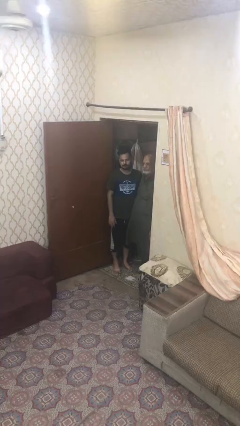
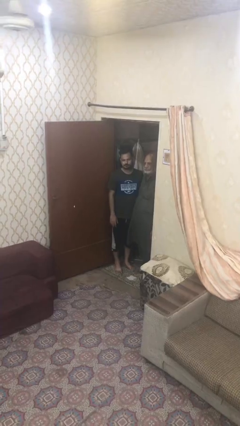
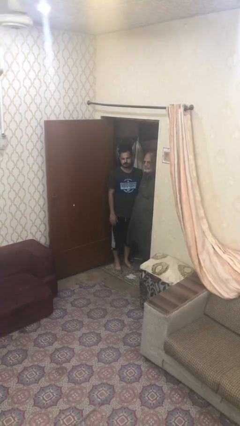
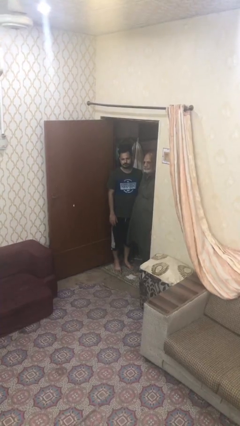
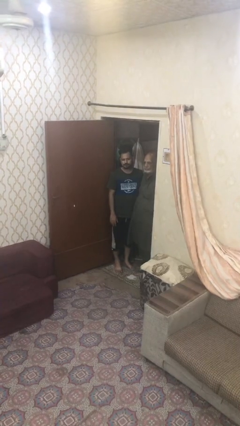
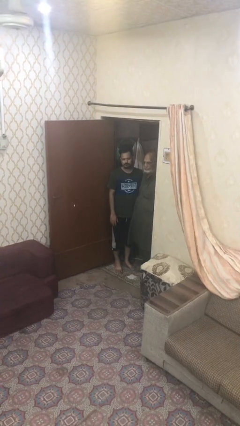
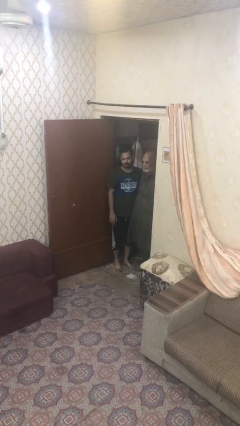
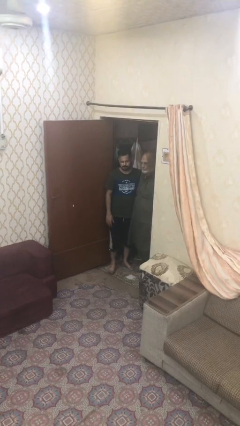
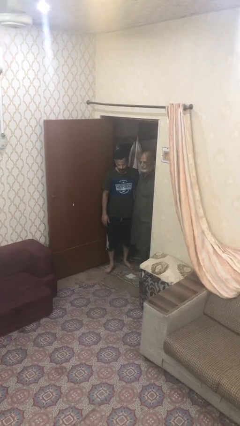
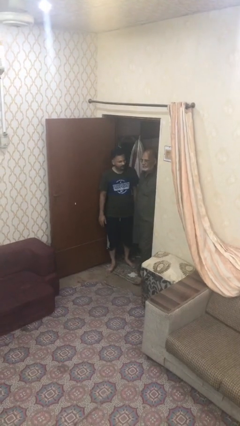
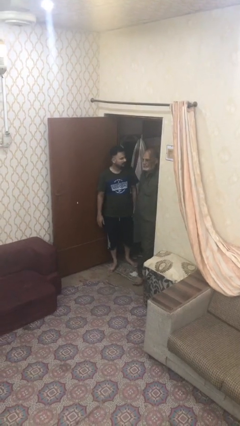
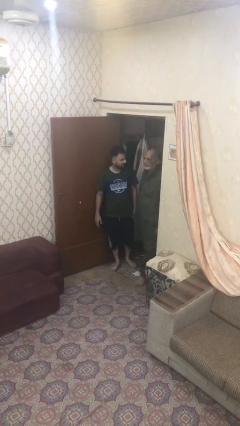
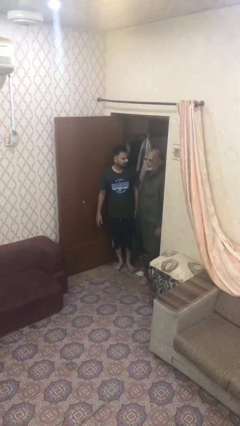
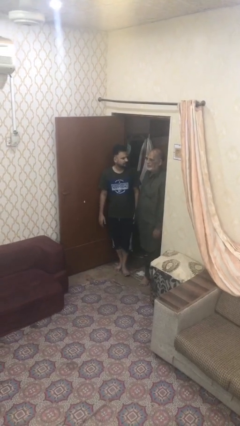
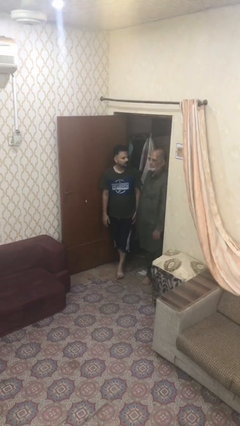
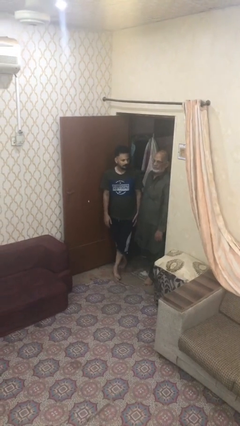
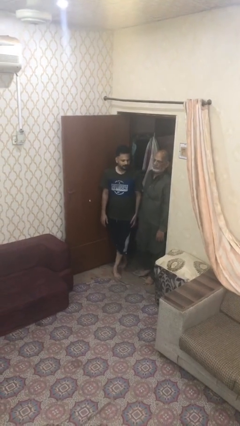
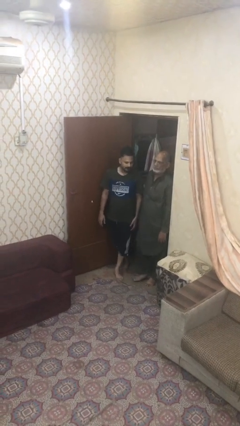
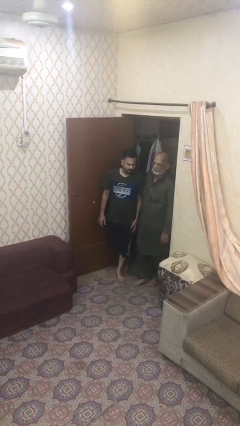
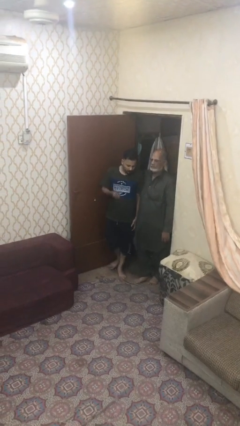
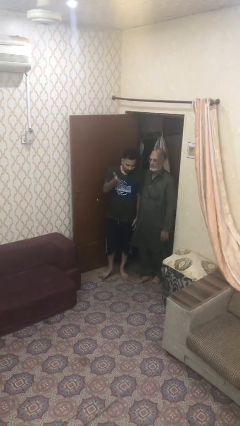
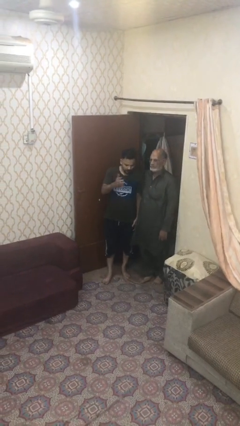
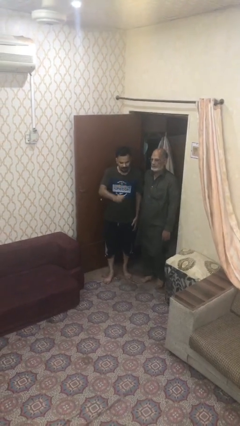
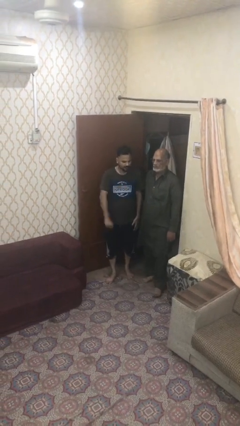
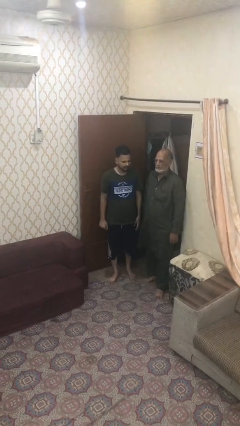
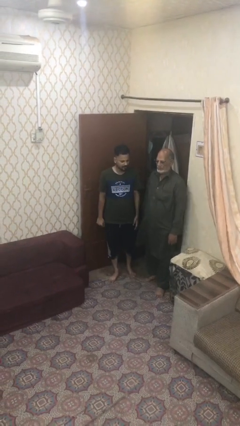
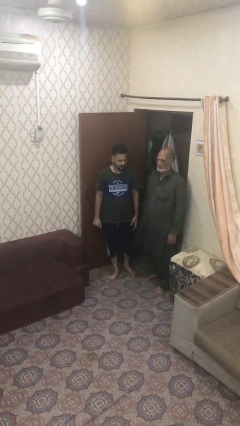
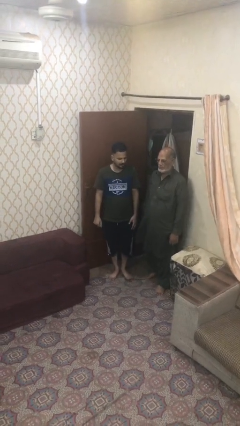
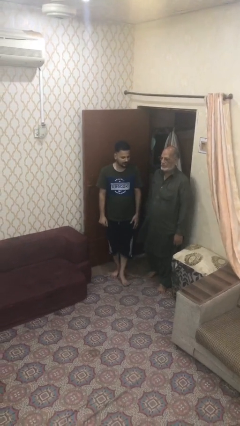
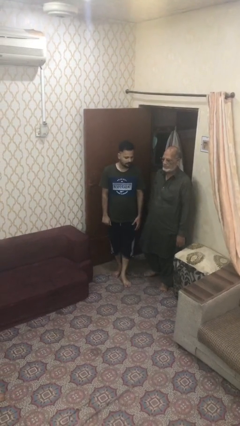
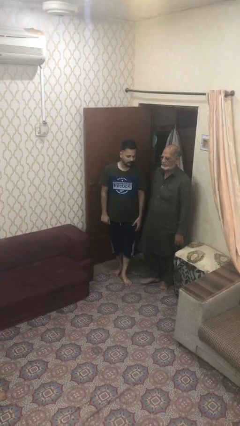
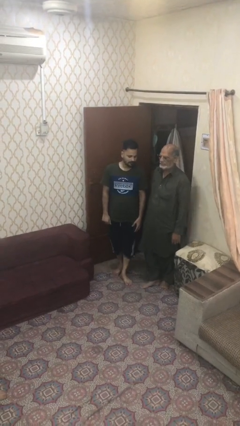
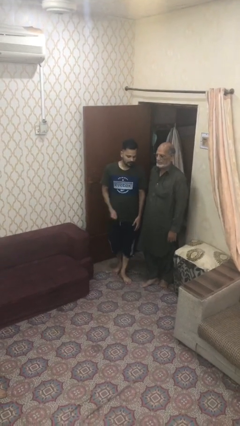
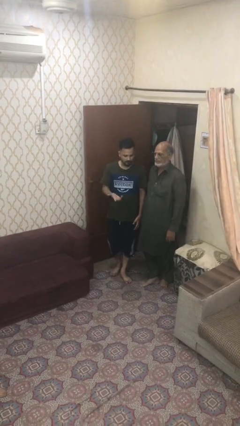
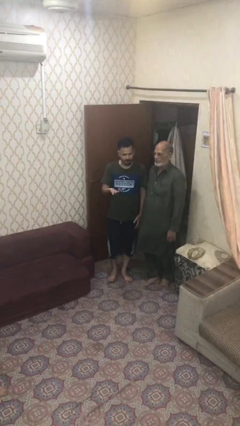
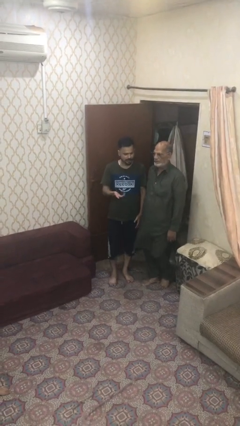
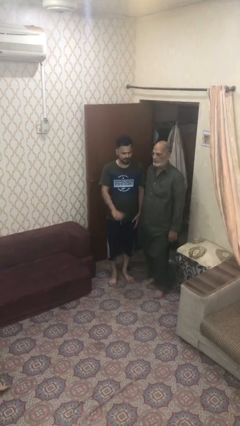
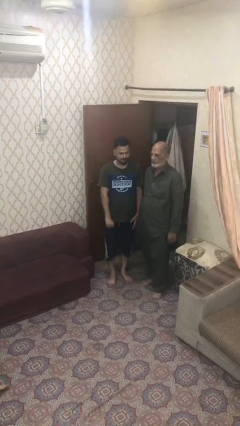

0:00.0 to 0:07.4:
person talks to person

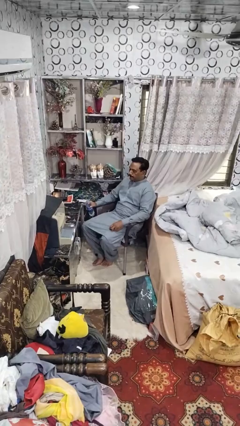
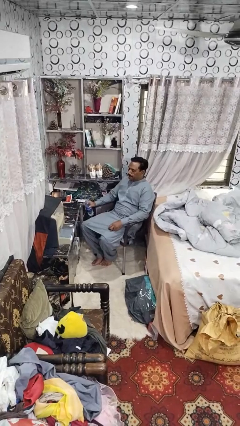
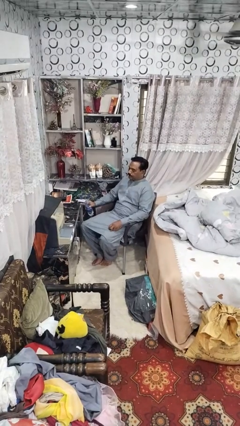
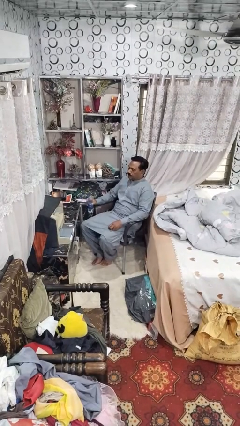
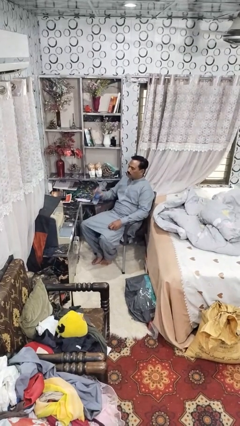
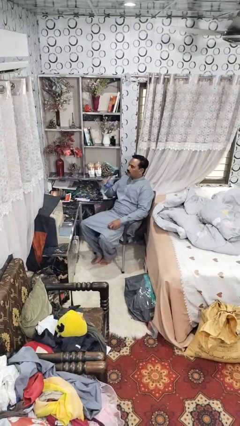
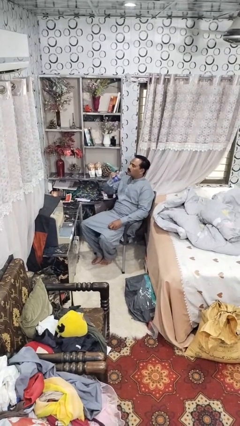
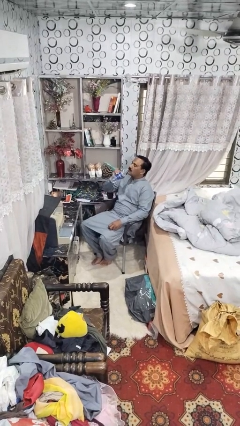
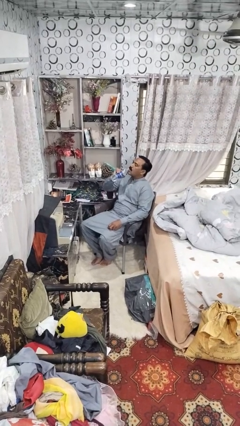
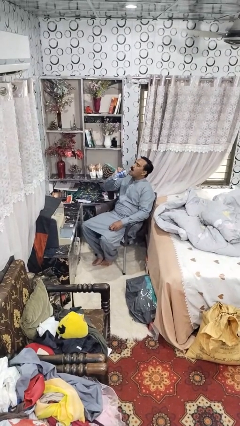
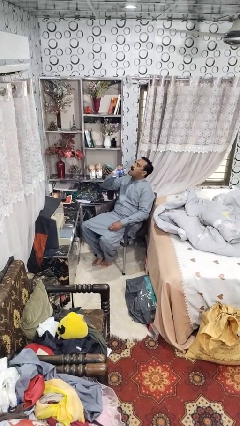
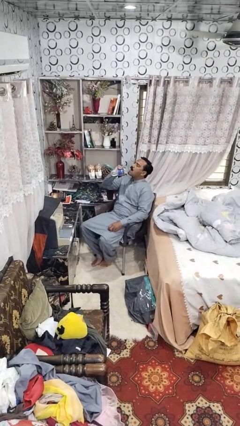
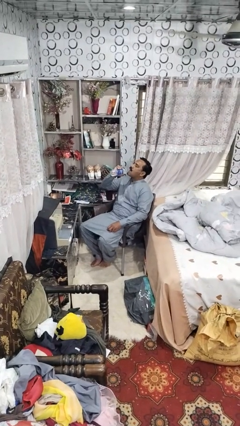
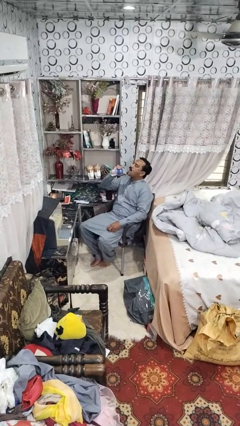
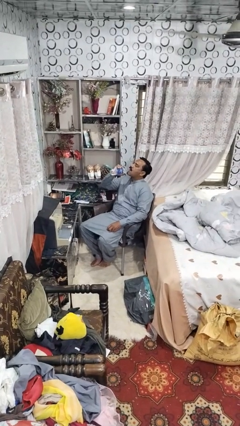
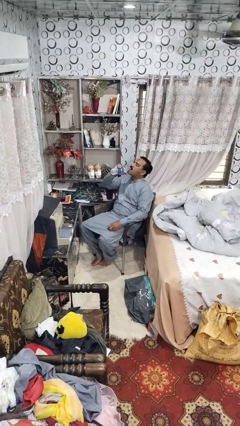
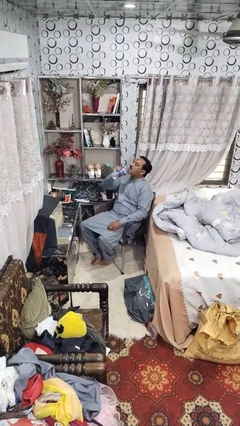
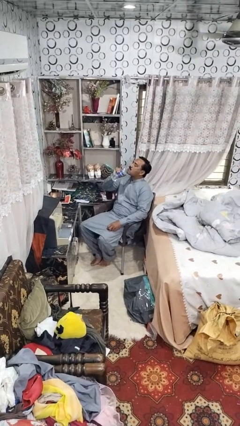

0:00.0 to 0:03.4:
person drinks from bottle

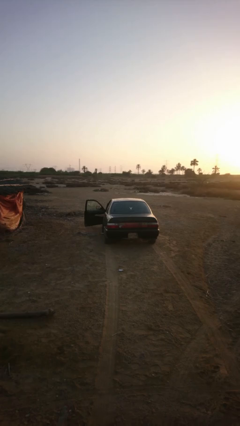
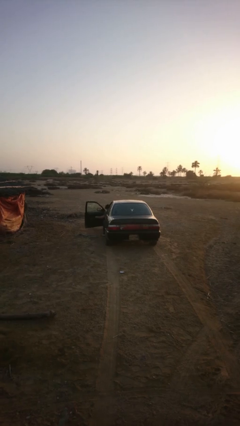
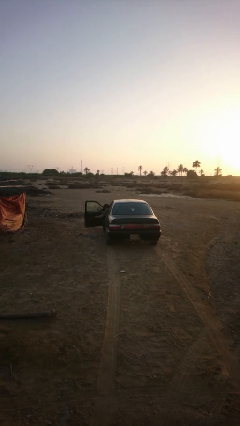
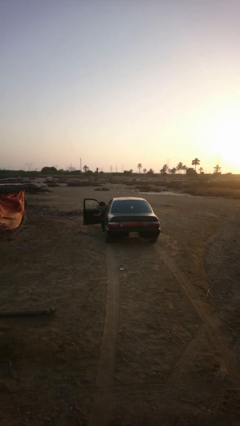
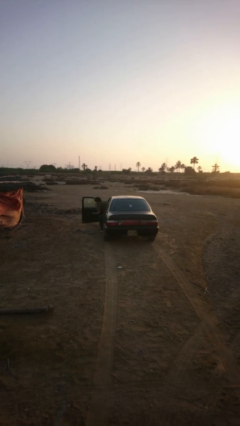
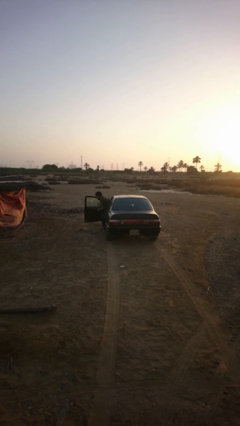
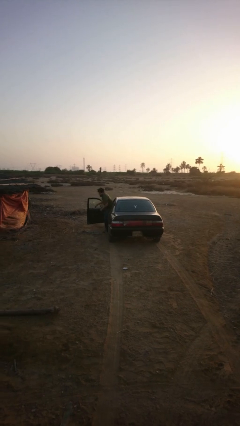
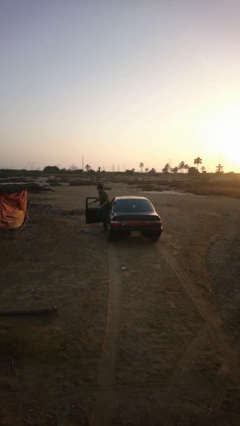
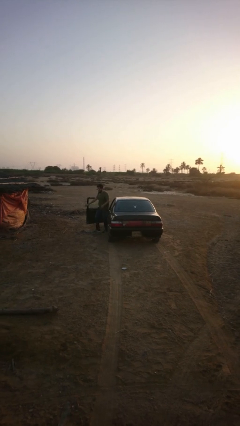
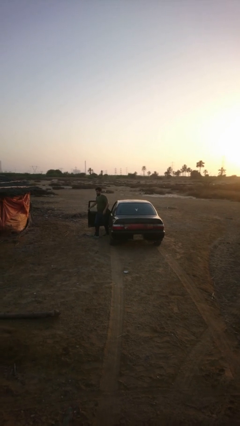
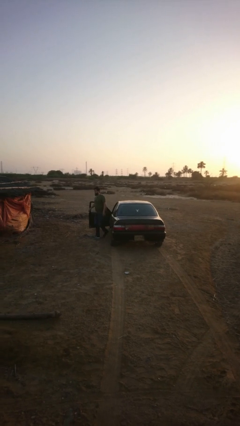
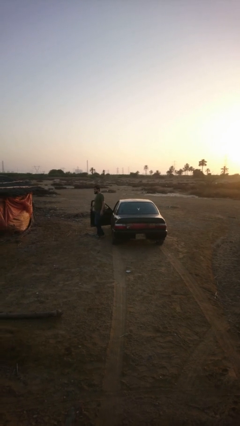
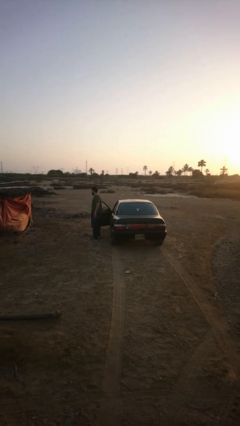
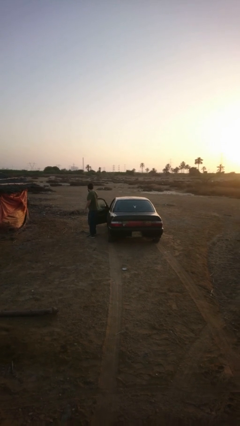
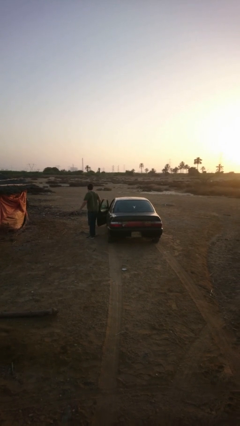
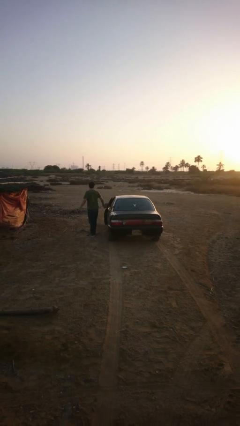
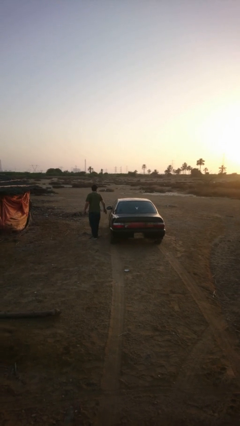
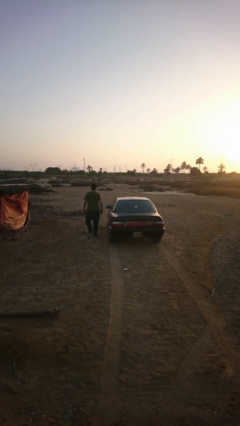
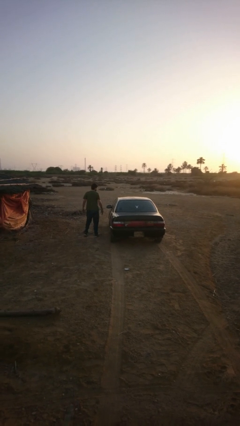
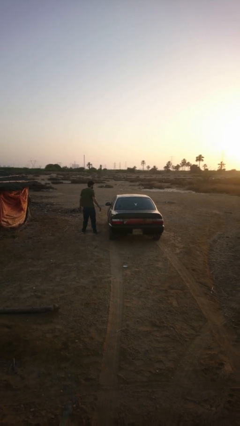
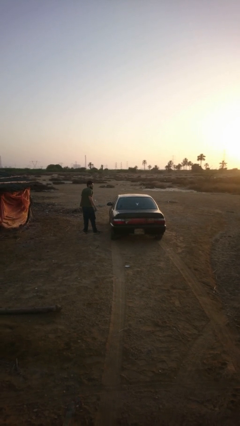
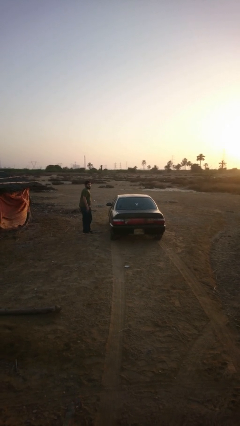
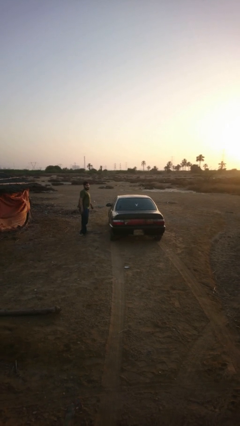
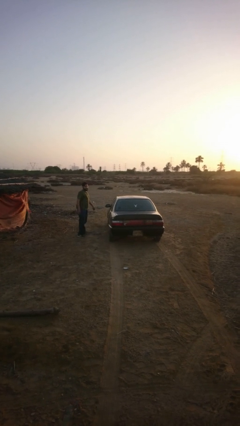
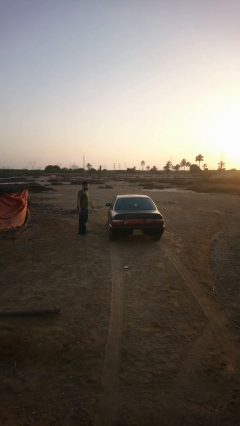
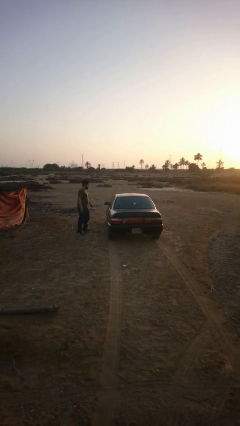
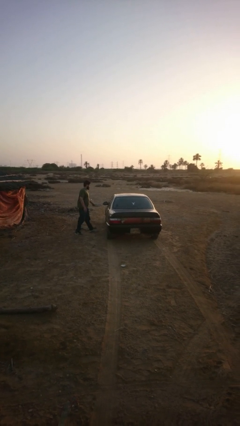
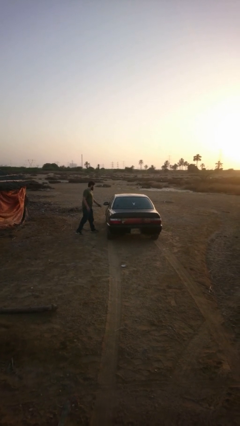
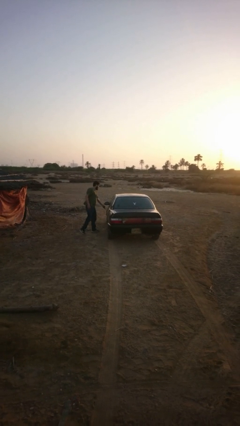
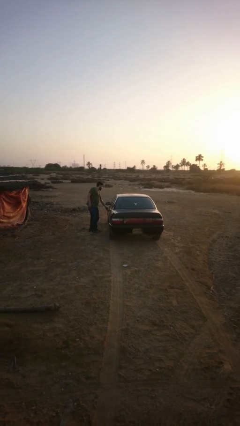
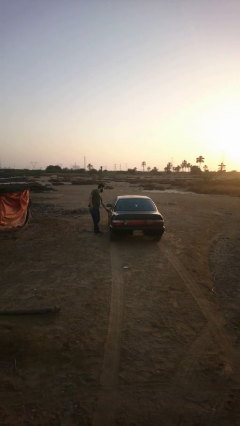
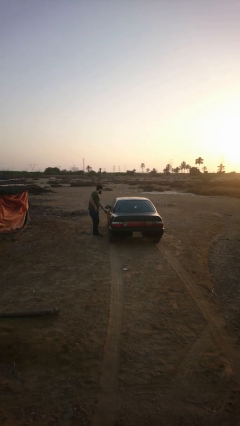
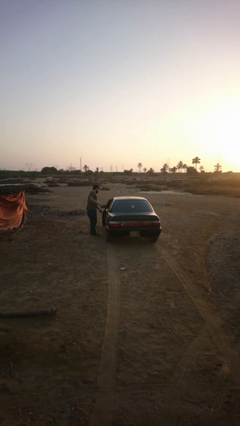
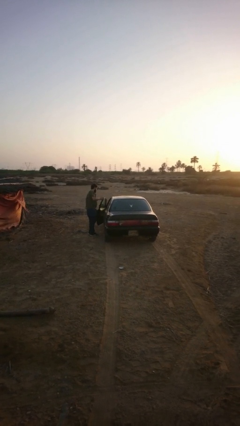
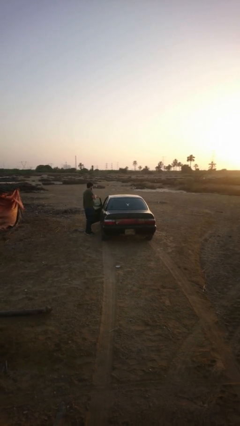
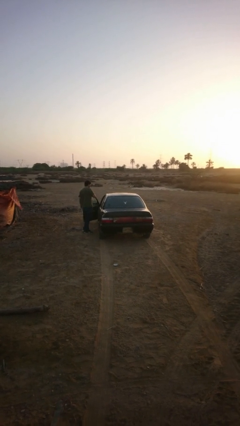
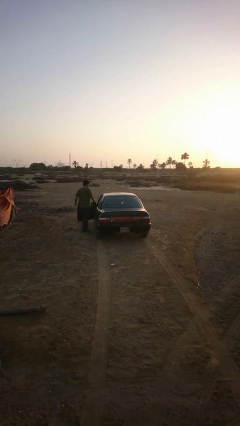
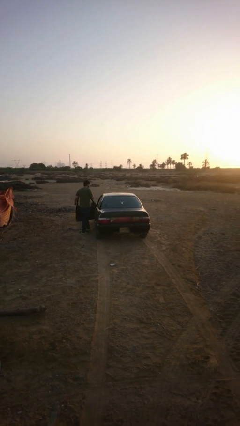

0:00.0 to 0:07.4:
car drops off person
